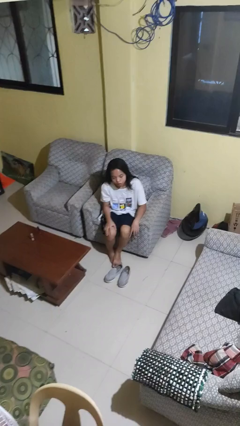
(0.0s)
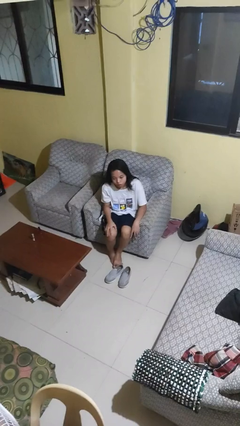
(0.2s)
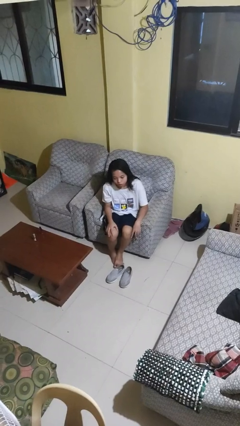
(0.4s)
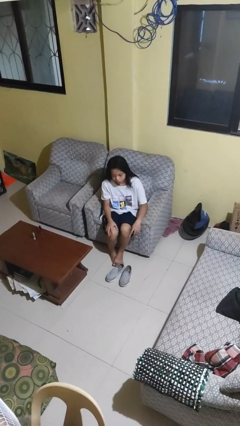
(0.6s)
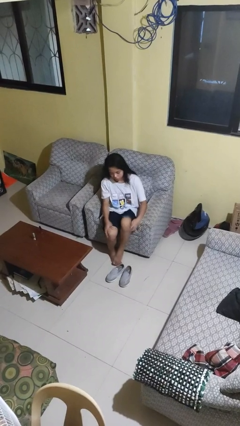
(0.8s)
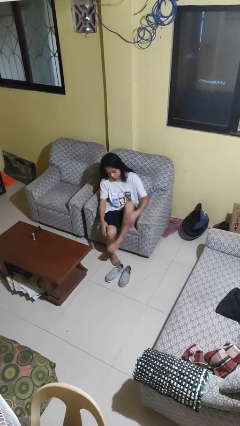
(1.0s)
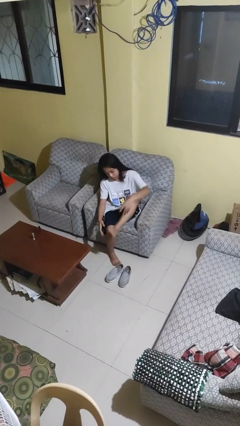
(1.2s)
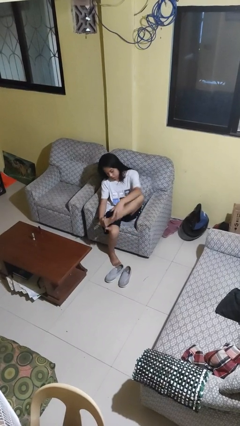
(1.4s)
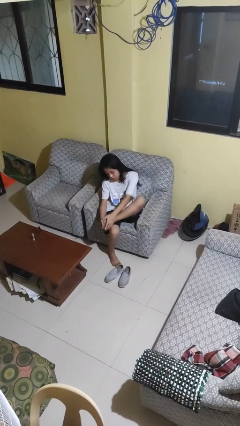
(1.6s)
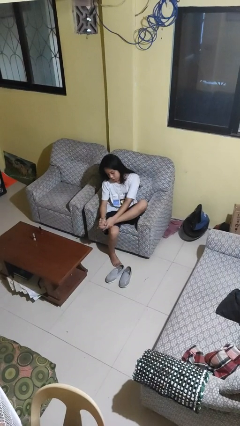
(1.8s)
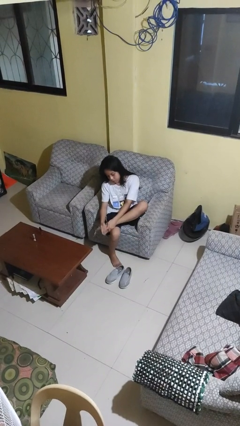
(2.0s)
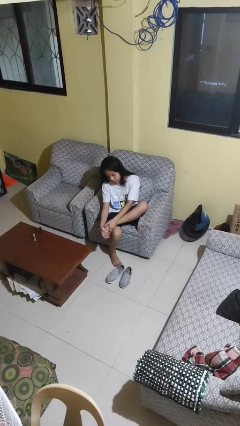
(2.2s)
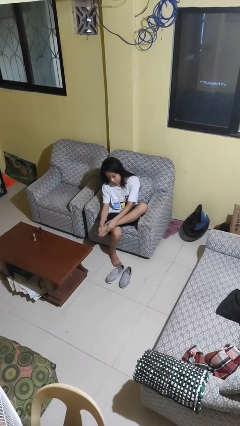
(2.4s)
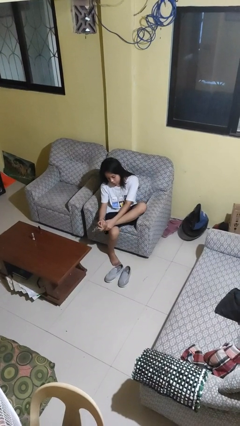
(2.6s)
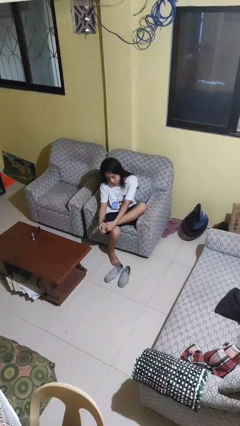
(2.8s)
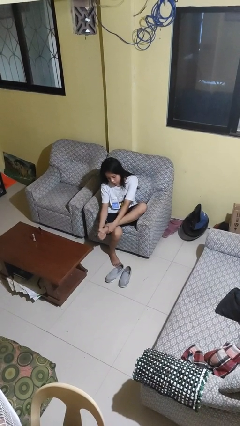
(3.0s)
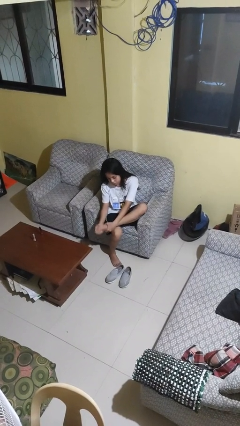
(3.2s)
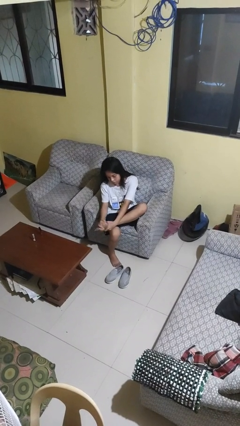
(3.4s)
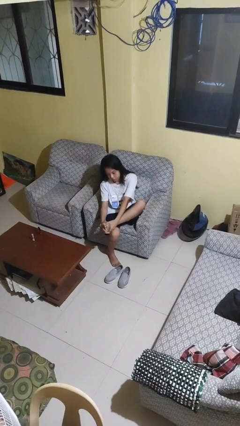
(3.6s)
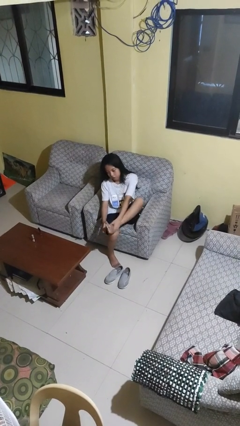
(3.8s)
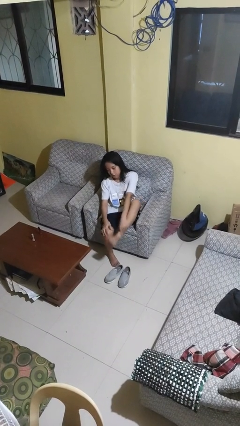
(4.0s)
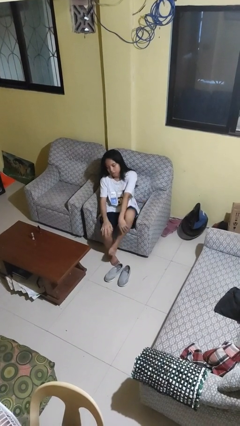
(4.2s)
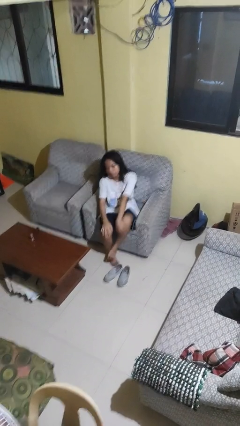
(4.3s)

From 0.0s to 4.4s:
person rubs foot

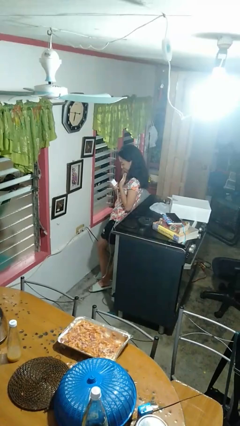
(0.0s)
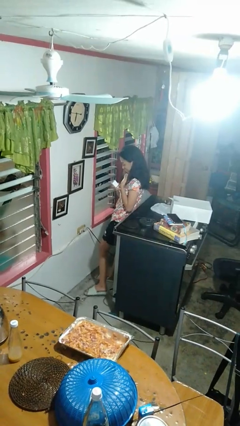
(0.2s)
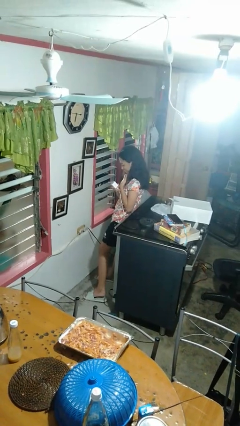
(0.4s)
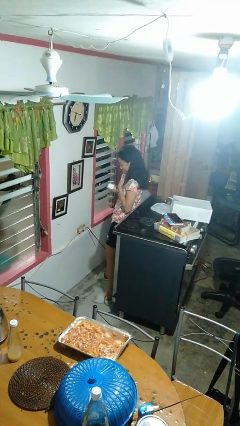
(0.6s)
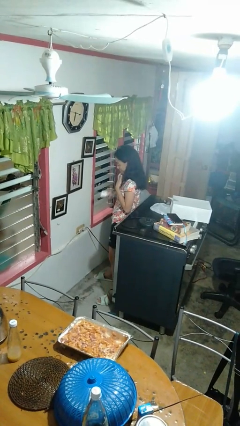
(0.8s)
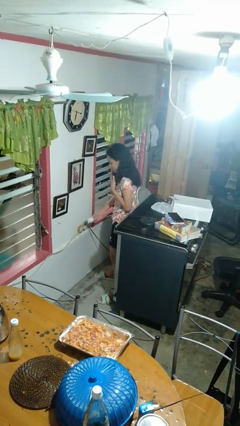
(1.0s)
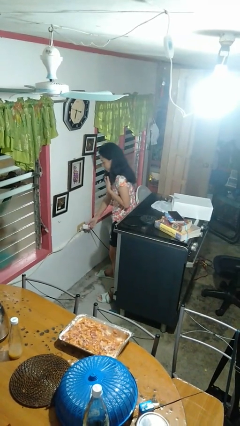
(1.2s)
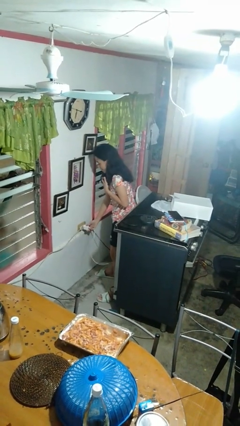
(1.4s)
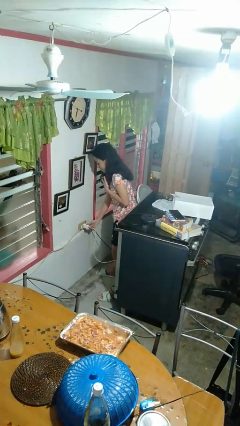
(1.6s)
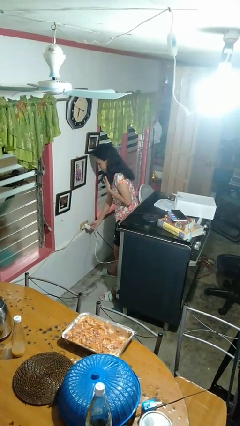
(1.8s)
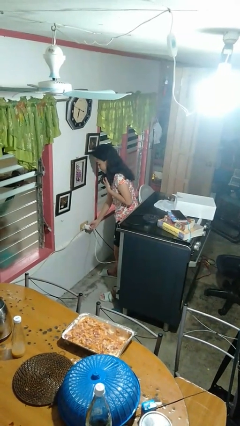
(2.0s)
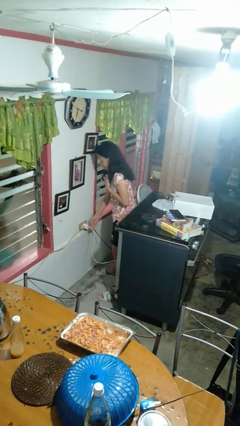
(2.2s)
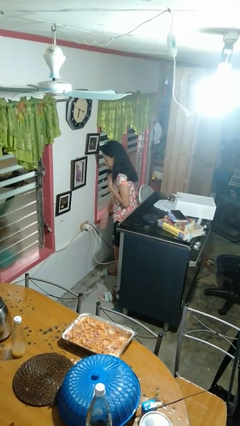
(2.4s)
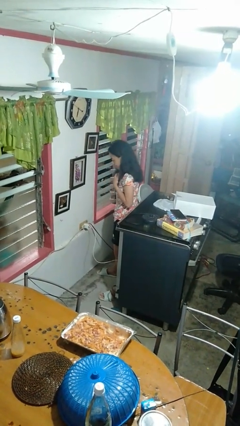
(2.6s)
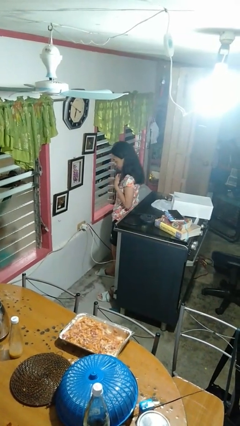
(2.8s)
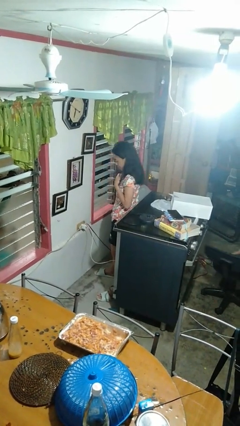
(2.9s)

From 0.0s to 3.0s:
person plugs into electrical socket

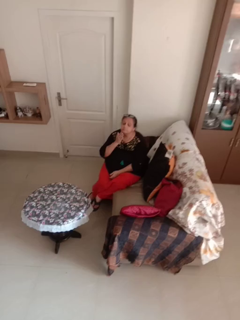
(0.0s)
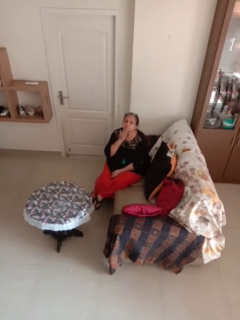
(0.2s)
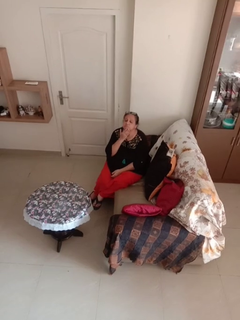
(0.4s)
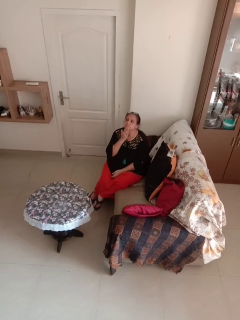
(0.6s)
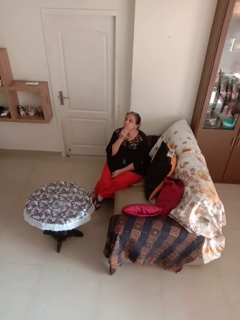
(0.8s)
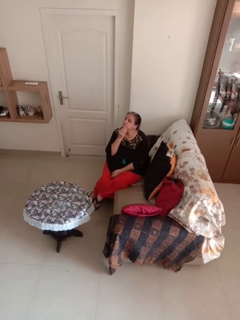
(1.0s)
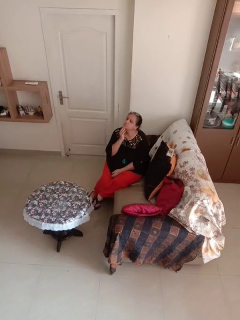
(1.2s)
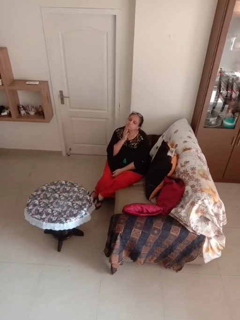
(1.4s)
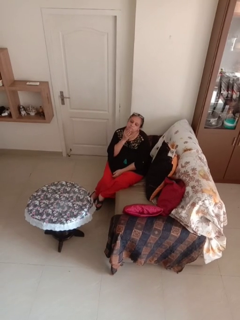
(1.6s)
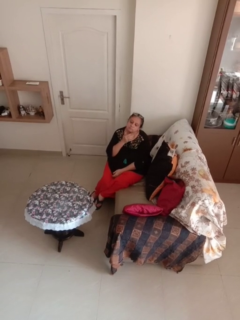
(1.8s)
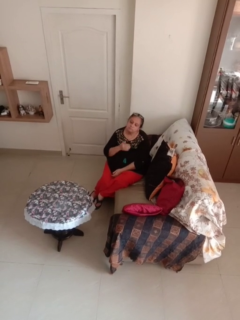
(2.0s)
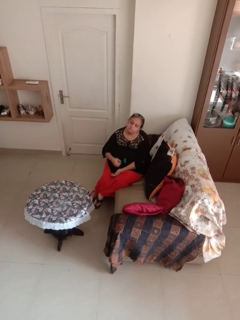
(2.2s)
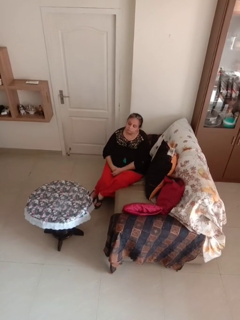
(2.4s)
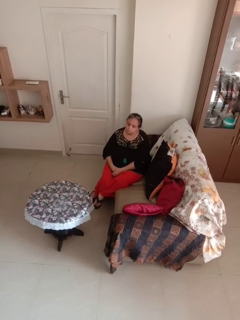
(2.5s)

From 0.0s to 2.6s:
person strokes chin

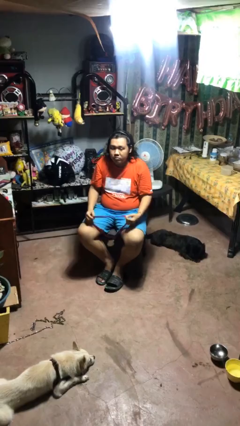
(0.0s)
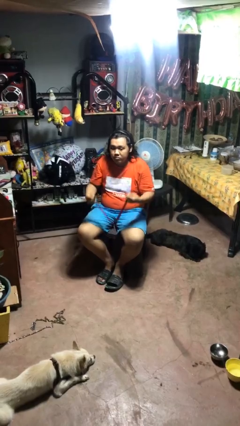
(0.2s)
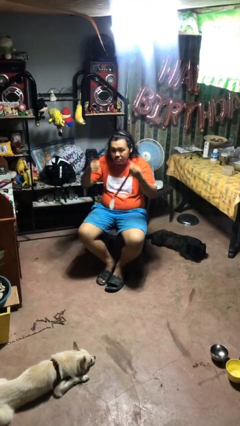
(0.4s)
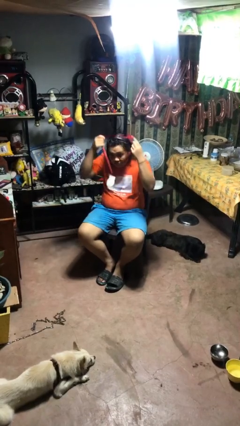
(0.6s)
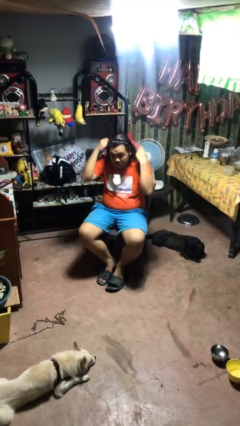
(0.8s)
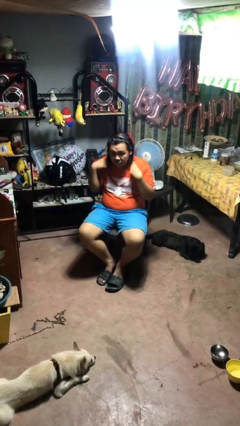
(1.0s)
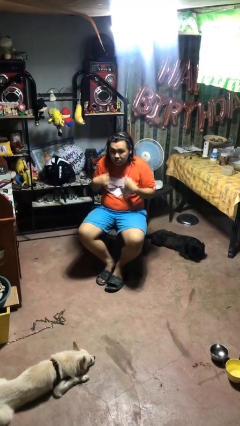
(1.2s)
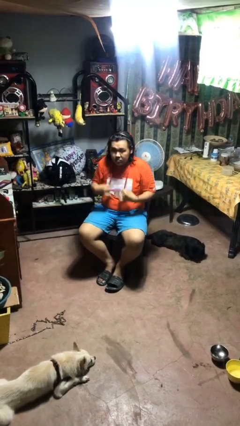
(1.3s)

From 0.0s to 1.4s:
person puts on necklace

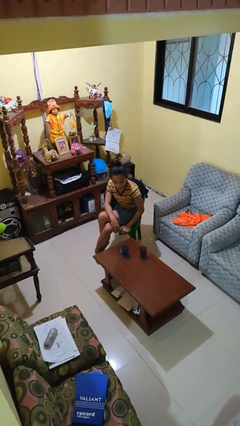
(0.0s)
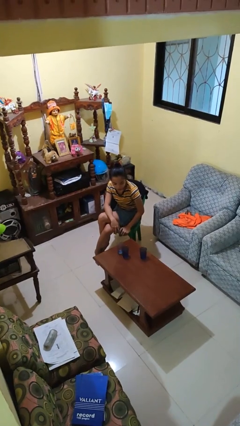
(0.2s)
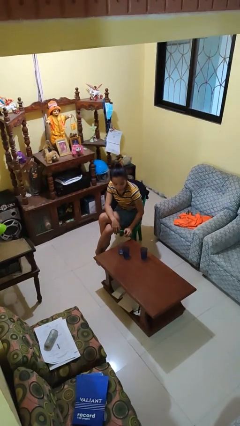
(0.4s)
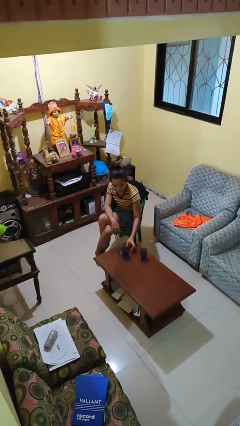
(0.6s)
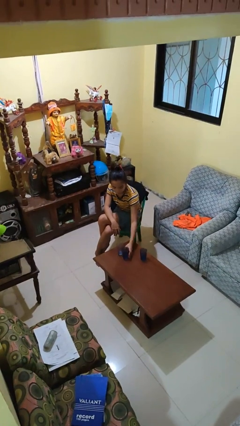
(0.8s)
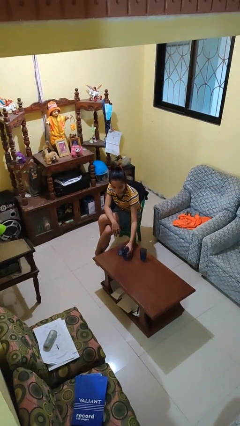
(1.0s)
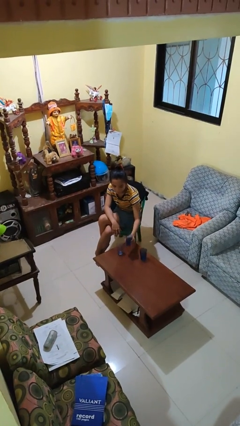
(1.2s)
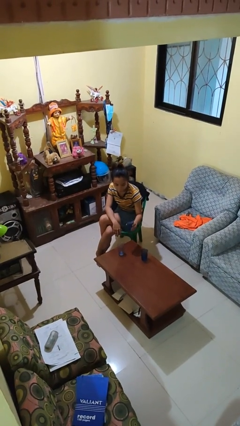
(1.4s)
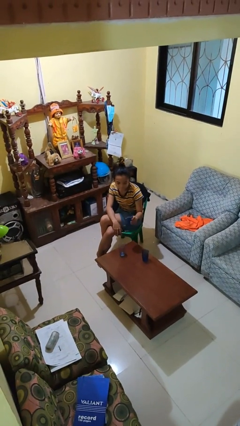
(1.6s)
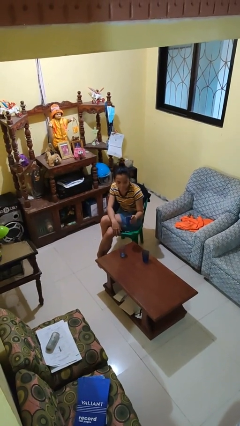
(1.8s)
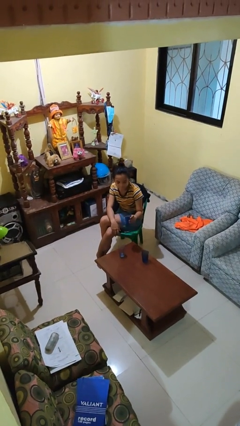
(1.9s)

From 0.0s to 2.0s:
person picks up object from table

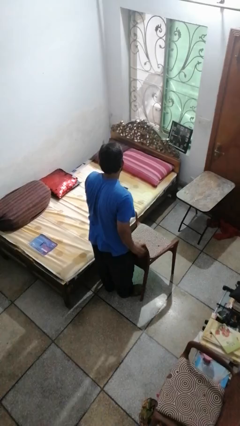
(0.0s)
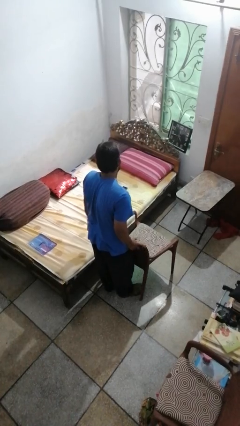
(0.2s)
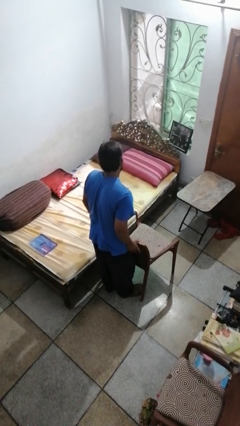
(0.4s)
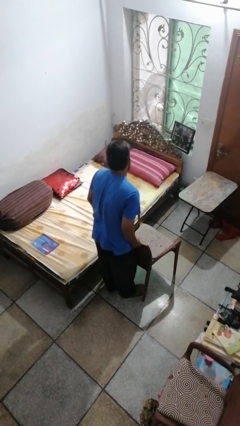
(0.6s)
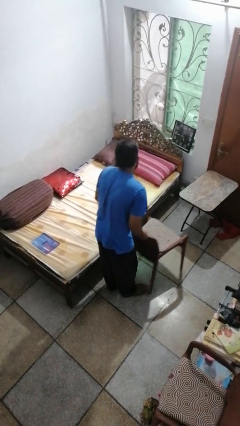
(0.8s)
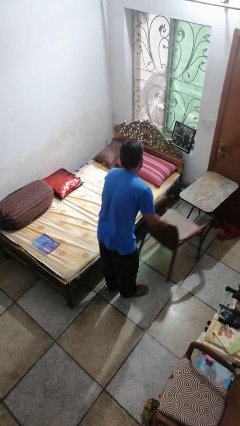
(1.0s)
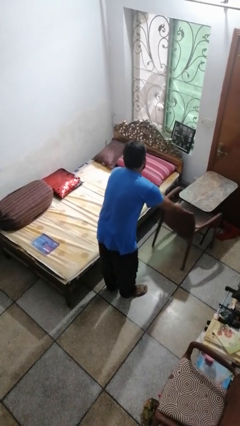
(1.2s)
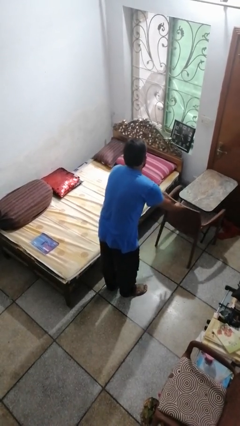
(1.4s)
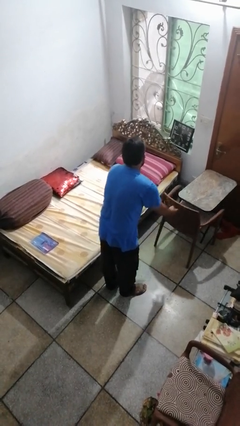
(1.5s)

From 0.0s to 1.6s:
person pushes in chair

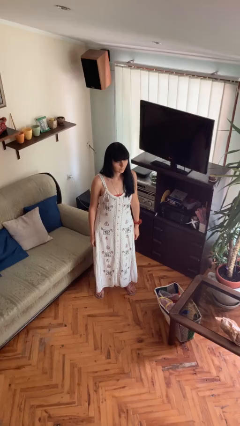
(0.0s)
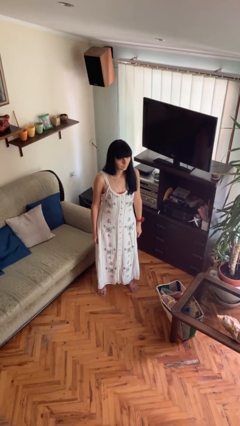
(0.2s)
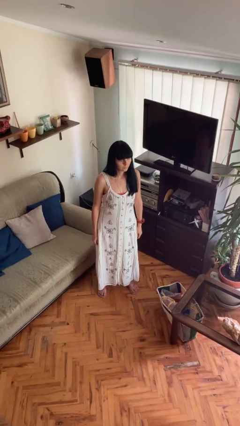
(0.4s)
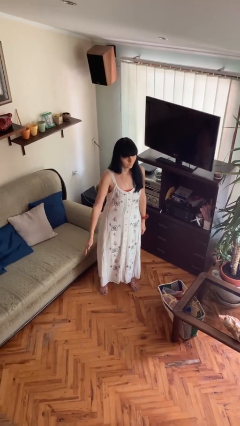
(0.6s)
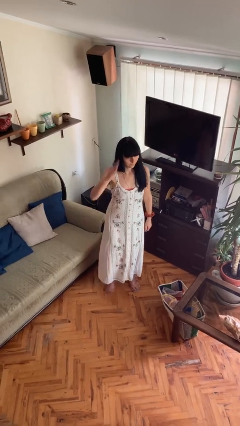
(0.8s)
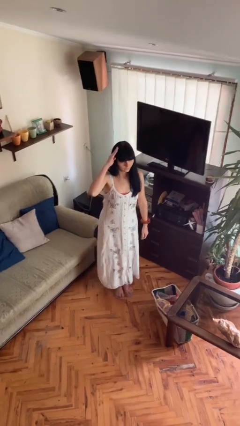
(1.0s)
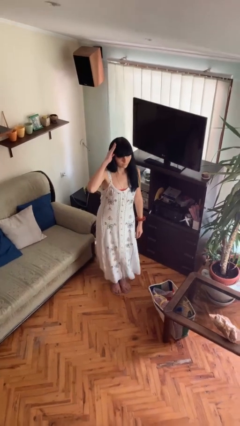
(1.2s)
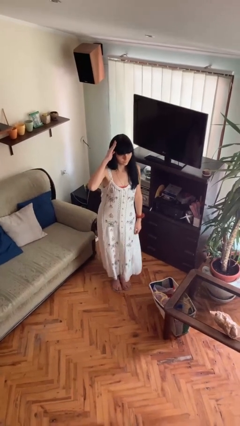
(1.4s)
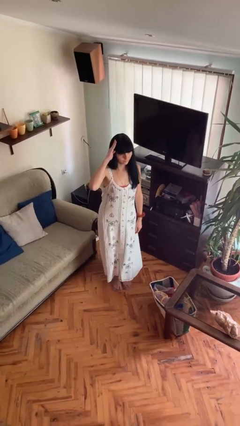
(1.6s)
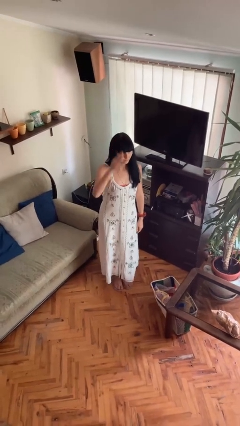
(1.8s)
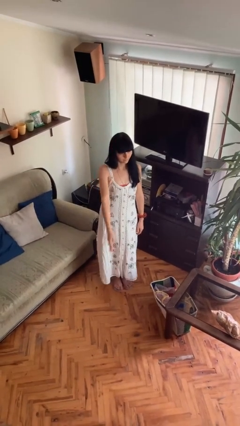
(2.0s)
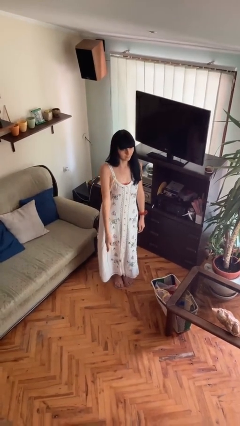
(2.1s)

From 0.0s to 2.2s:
person salutes

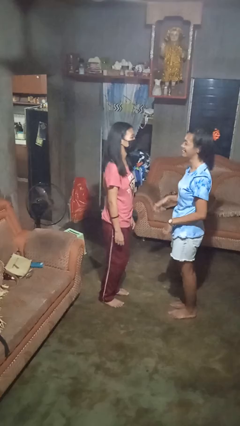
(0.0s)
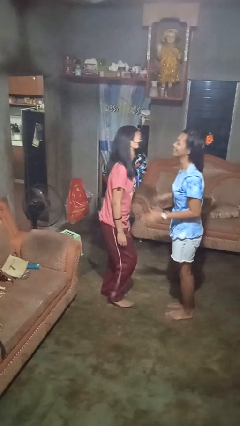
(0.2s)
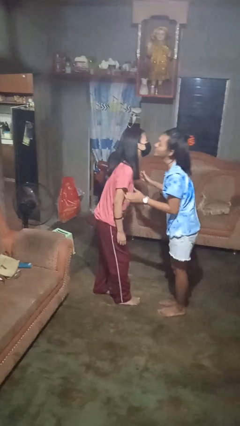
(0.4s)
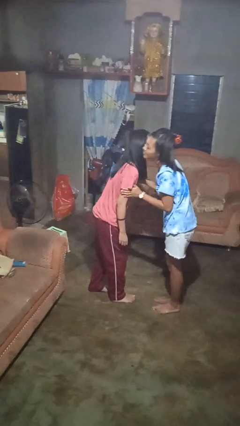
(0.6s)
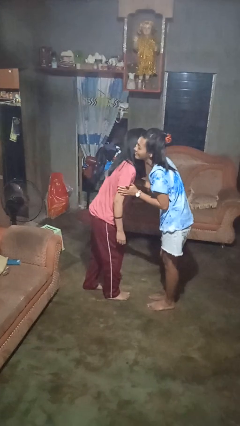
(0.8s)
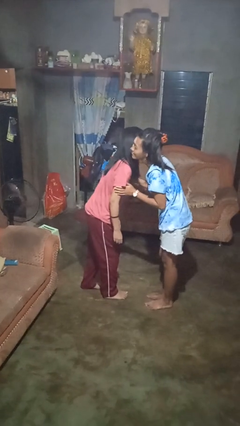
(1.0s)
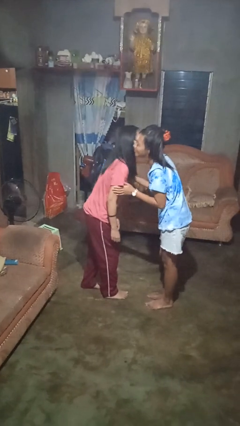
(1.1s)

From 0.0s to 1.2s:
person kisses cheek of person
